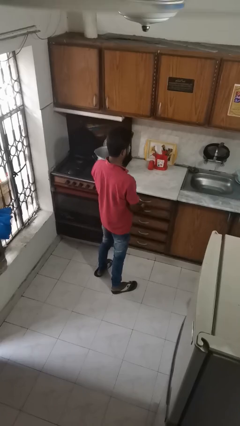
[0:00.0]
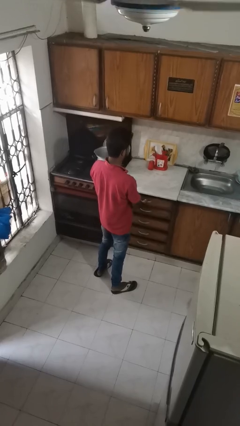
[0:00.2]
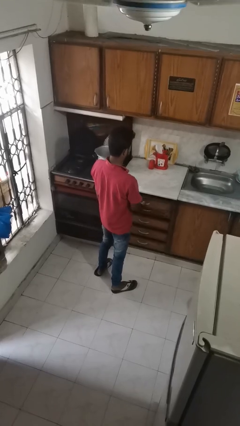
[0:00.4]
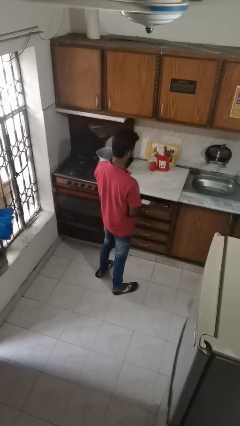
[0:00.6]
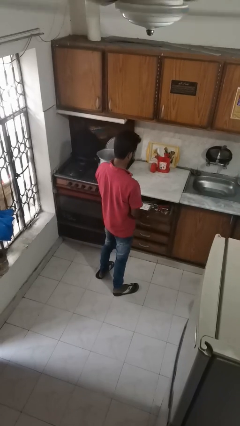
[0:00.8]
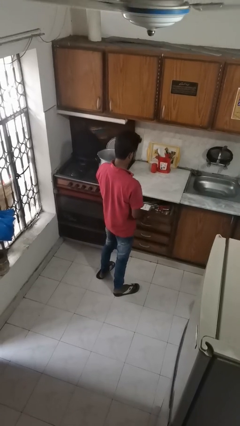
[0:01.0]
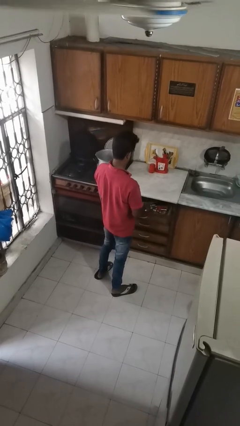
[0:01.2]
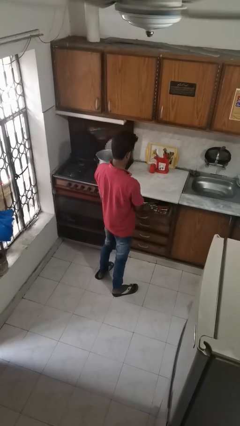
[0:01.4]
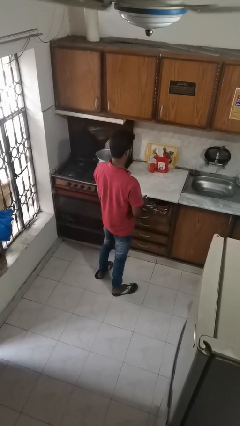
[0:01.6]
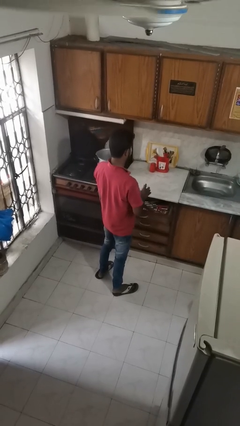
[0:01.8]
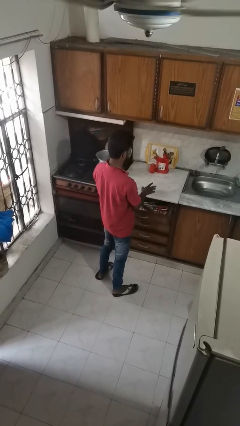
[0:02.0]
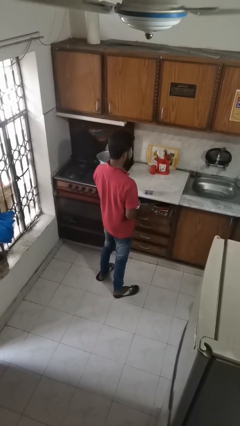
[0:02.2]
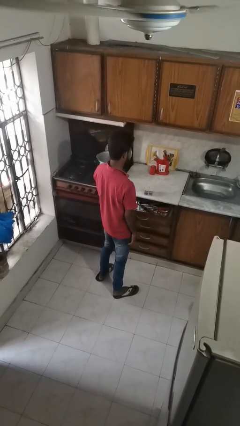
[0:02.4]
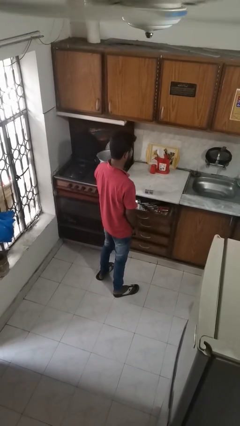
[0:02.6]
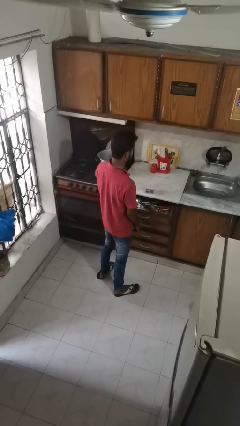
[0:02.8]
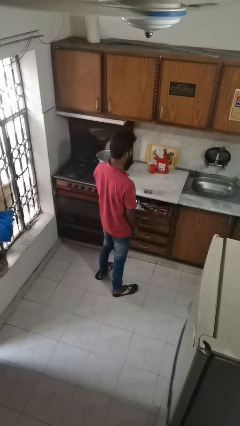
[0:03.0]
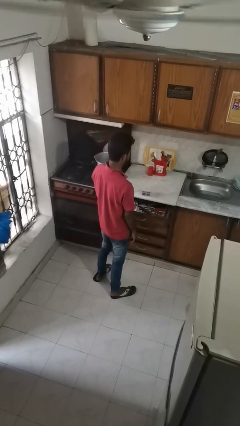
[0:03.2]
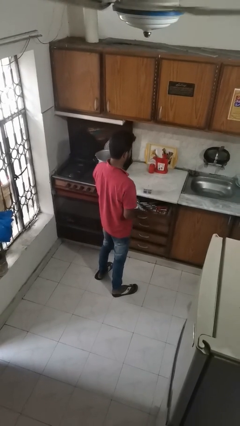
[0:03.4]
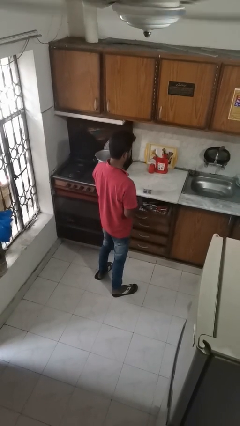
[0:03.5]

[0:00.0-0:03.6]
person takes object from kitchen drawer

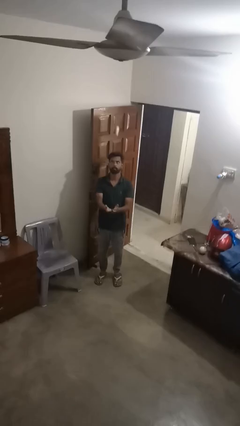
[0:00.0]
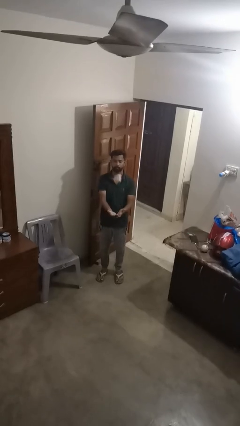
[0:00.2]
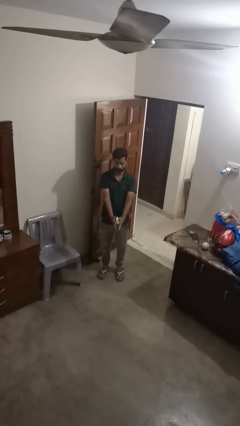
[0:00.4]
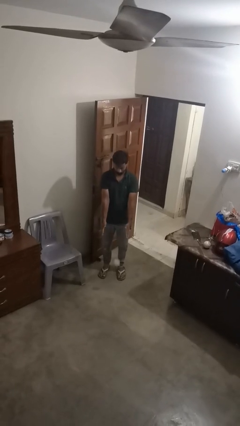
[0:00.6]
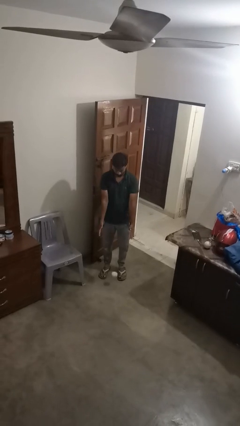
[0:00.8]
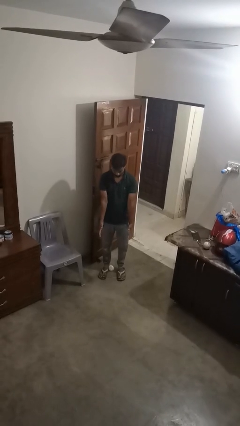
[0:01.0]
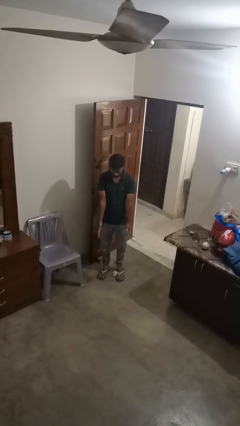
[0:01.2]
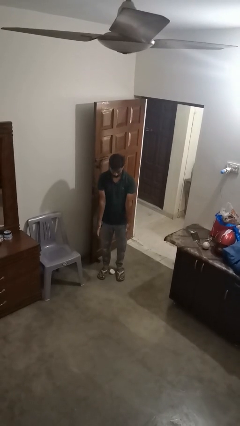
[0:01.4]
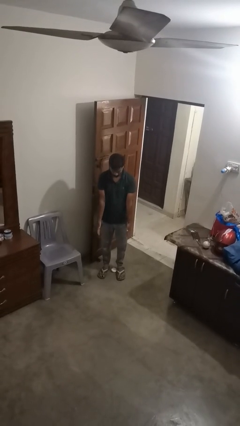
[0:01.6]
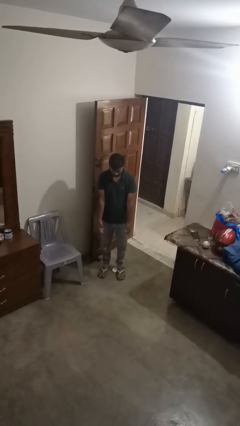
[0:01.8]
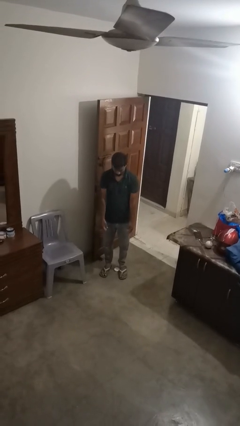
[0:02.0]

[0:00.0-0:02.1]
person catches dropped object

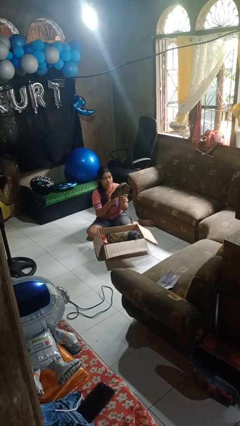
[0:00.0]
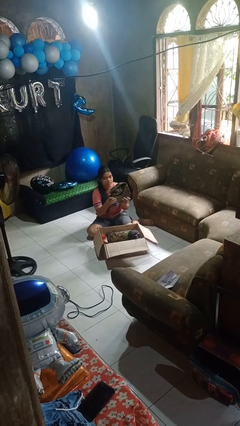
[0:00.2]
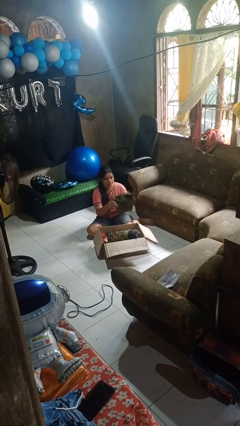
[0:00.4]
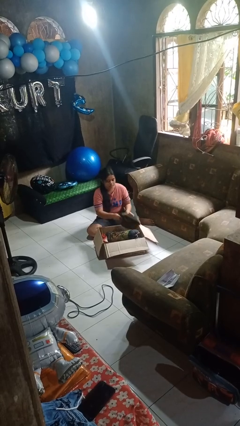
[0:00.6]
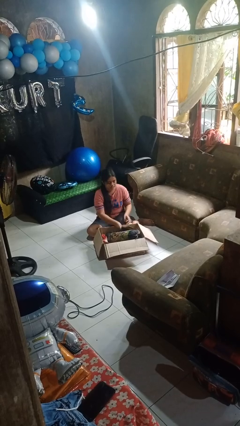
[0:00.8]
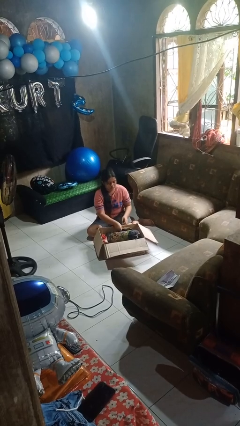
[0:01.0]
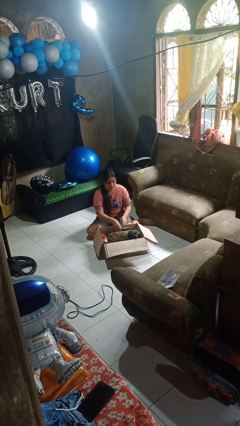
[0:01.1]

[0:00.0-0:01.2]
person puts object into box

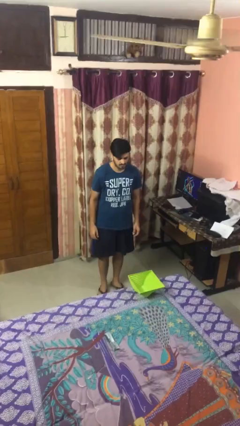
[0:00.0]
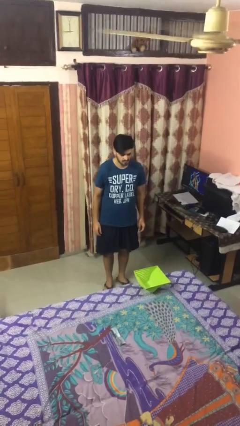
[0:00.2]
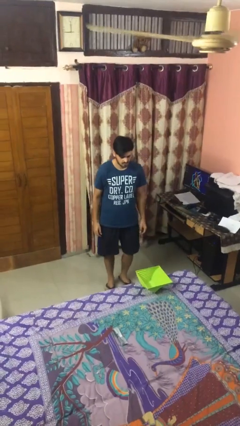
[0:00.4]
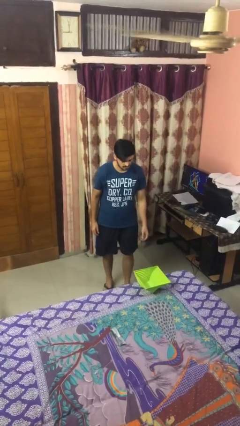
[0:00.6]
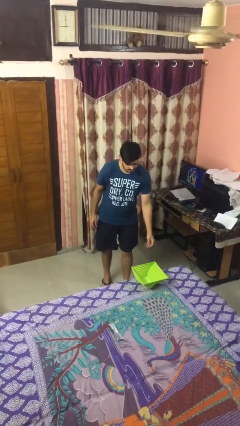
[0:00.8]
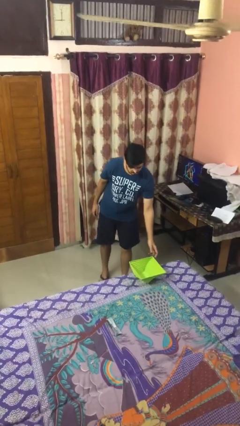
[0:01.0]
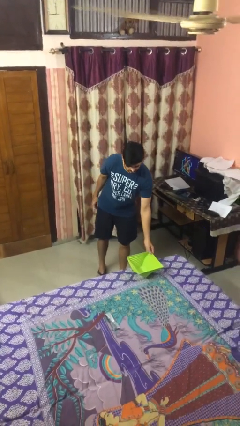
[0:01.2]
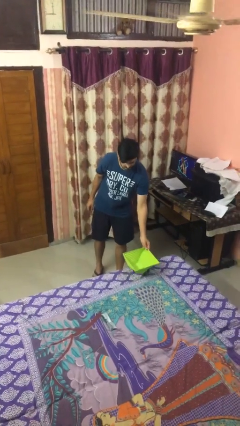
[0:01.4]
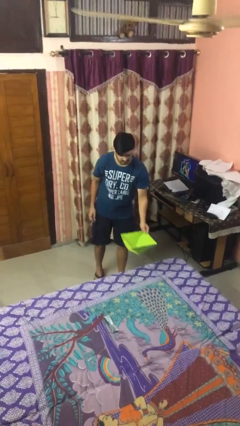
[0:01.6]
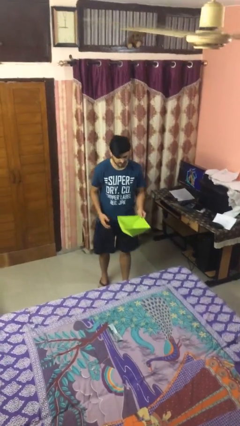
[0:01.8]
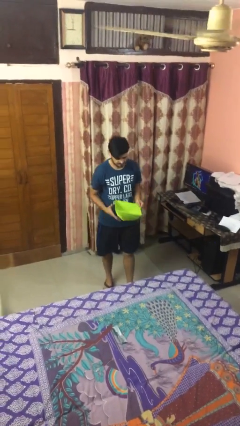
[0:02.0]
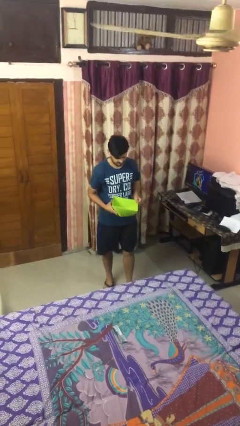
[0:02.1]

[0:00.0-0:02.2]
person picks up object from bed

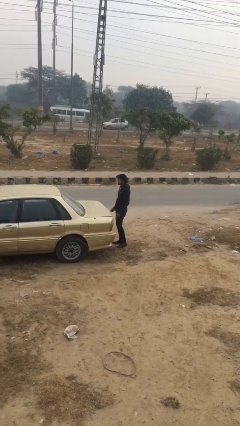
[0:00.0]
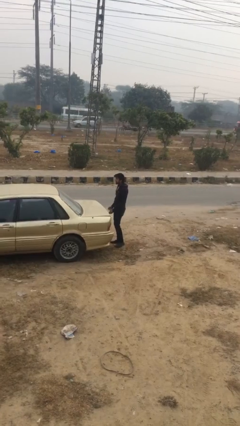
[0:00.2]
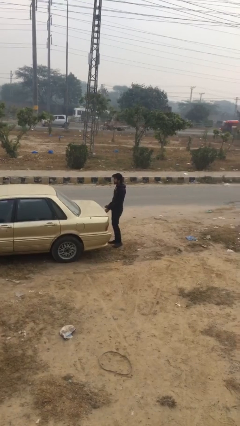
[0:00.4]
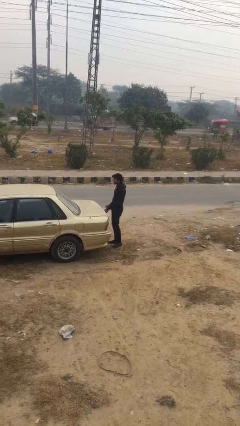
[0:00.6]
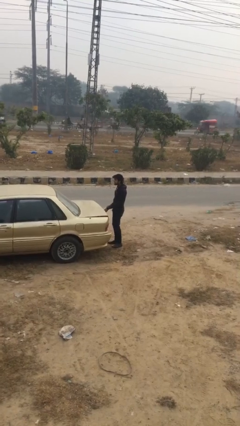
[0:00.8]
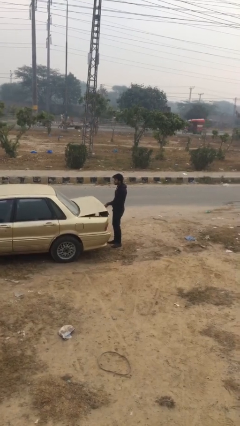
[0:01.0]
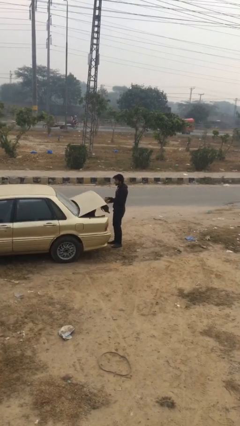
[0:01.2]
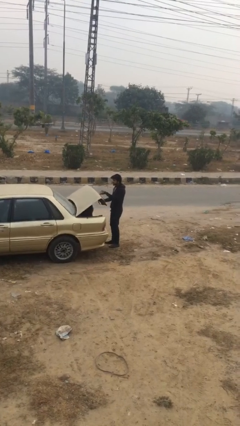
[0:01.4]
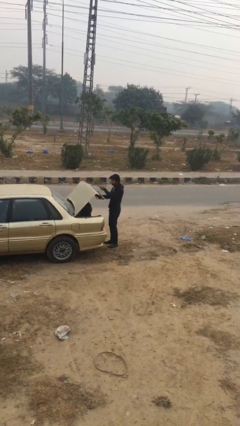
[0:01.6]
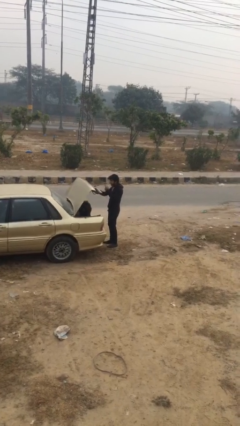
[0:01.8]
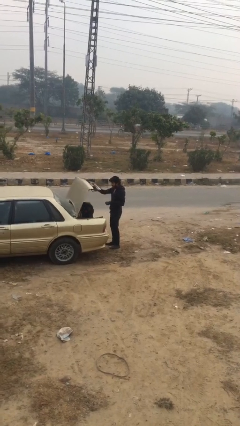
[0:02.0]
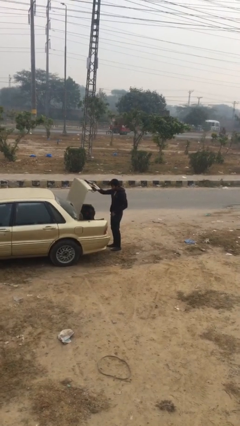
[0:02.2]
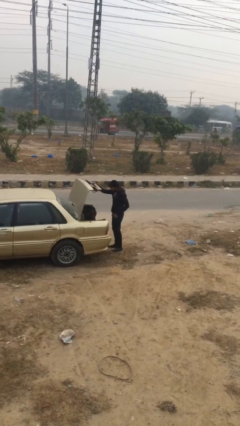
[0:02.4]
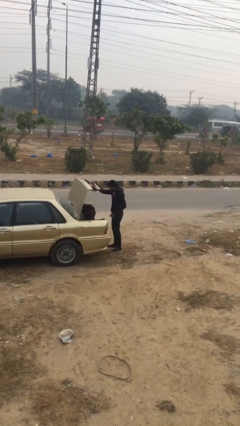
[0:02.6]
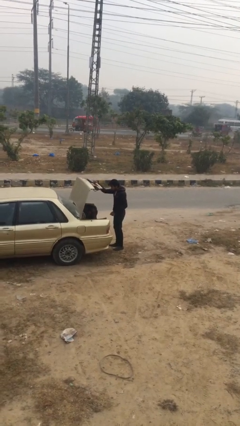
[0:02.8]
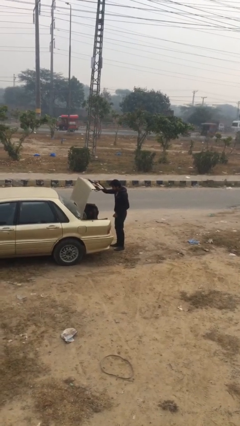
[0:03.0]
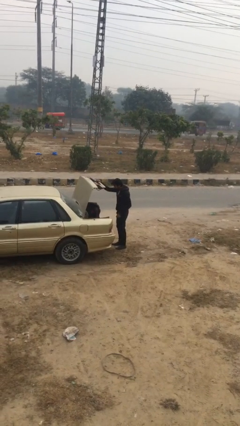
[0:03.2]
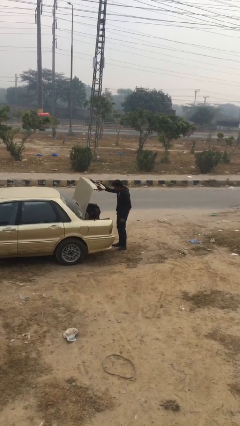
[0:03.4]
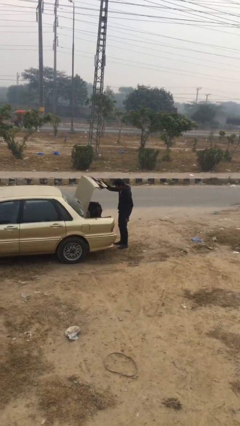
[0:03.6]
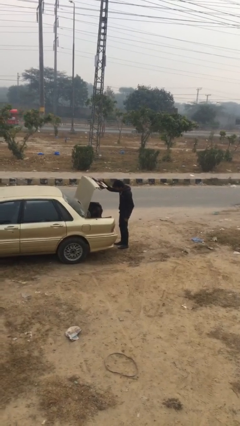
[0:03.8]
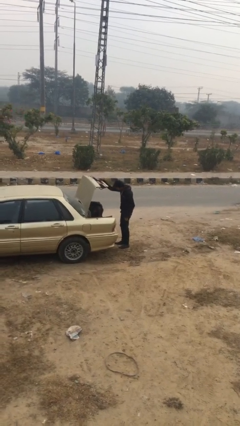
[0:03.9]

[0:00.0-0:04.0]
person opens car trunk

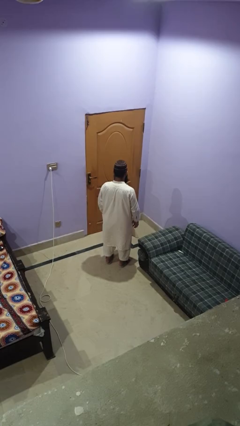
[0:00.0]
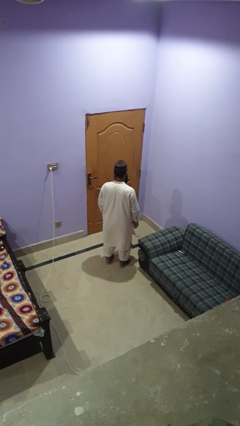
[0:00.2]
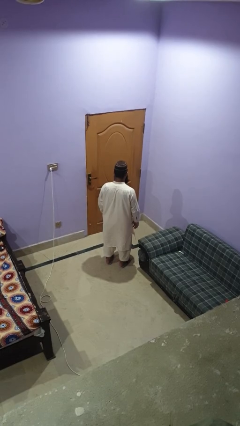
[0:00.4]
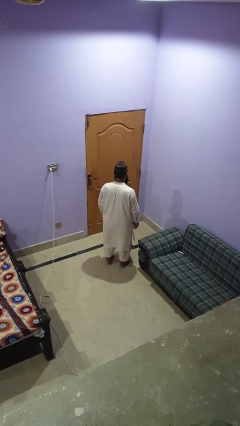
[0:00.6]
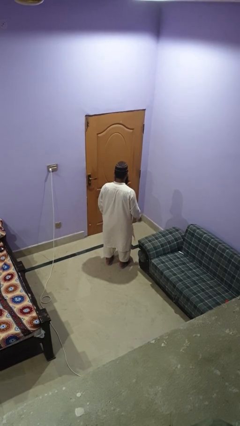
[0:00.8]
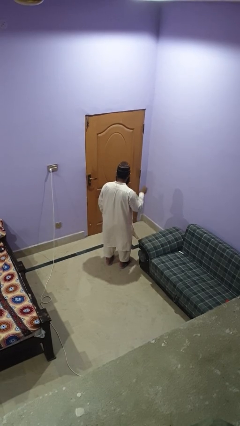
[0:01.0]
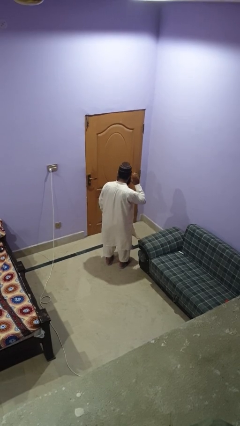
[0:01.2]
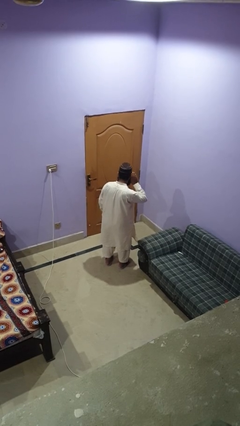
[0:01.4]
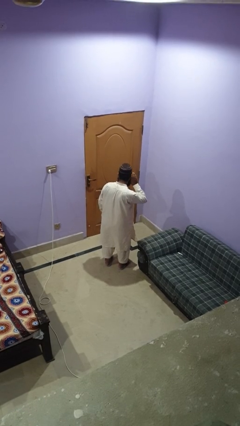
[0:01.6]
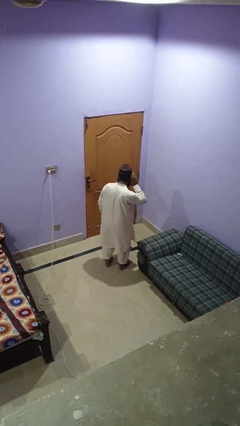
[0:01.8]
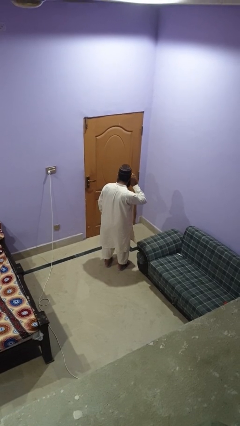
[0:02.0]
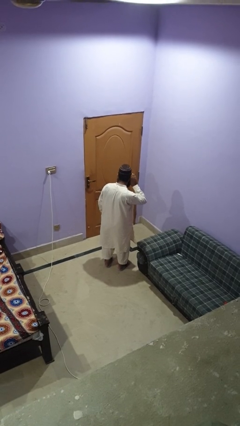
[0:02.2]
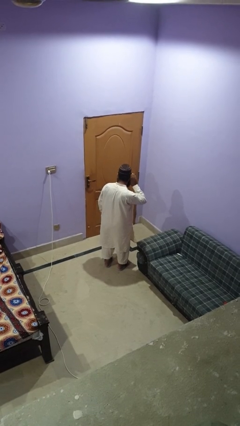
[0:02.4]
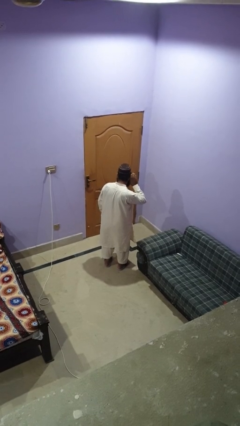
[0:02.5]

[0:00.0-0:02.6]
person gestures listen closely

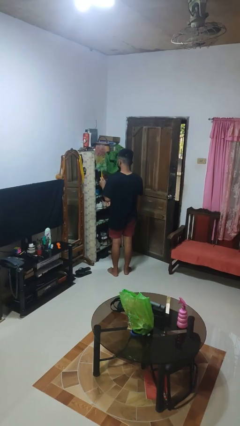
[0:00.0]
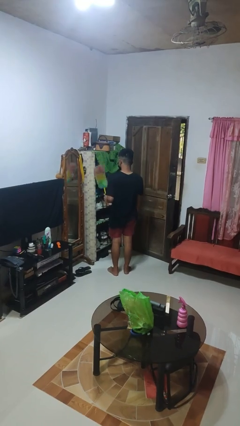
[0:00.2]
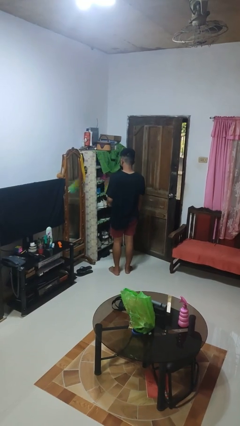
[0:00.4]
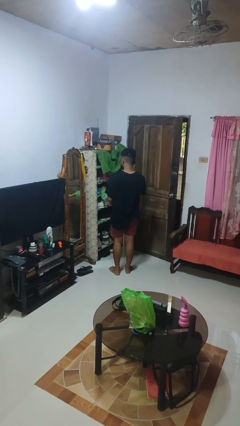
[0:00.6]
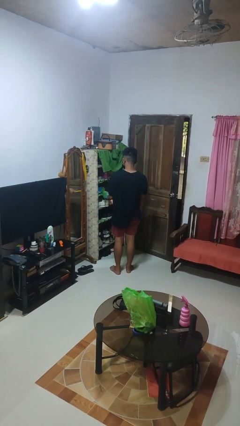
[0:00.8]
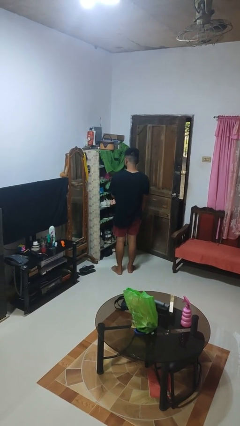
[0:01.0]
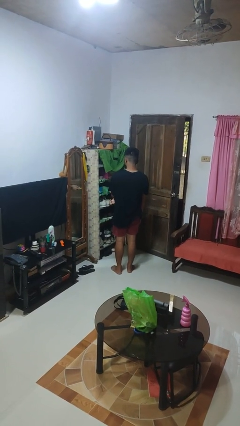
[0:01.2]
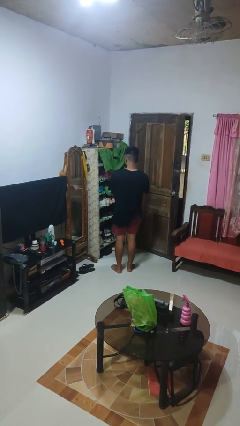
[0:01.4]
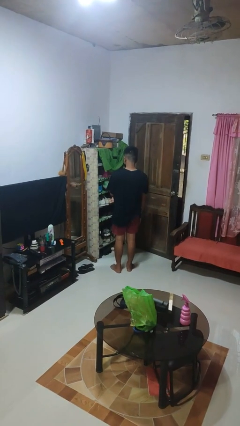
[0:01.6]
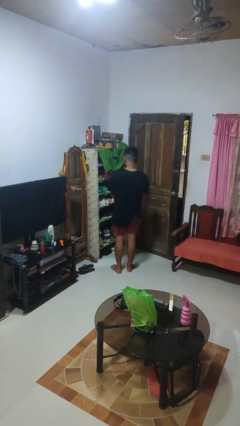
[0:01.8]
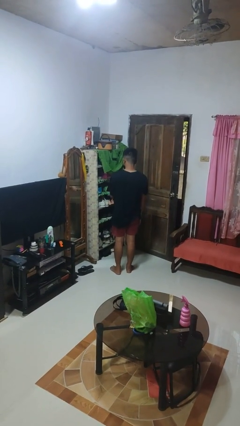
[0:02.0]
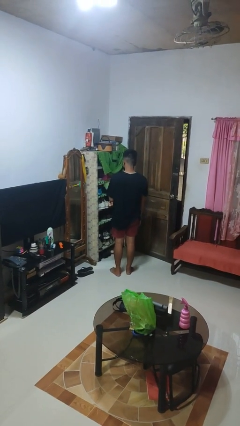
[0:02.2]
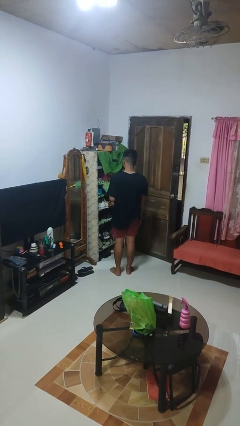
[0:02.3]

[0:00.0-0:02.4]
person dusts furniture
